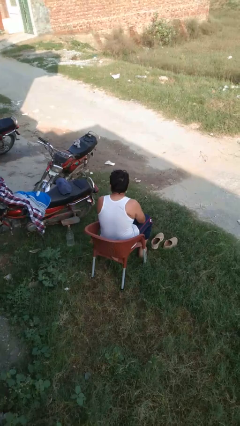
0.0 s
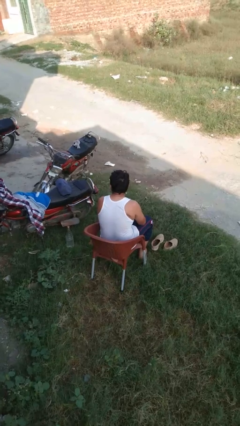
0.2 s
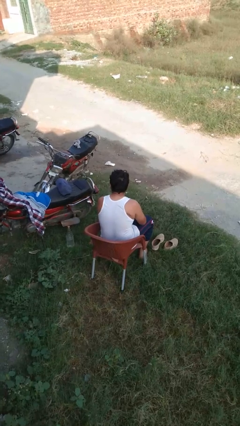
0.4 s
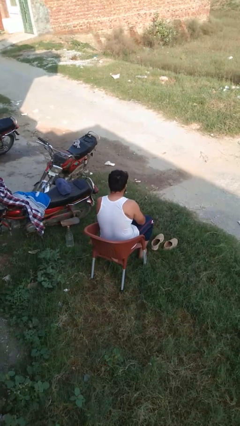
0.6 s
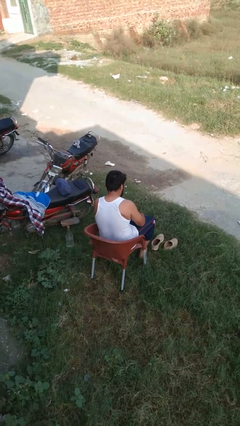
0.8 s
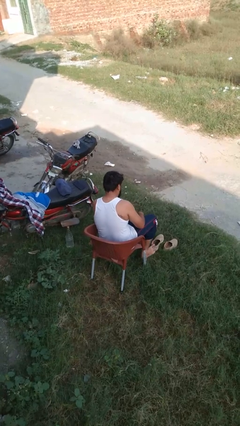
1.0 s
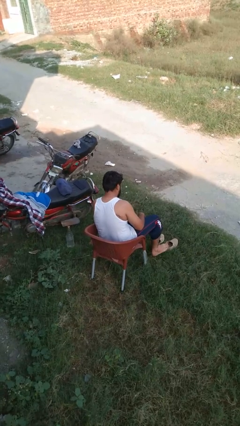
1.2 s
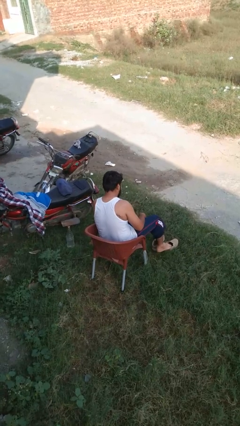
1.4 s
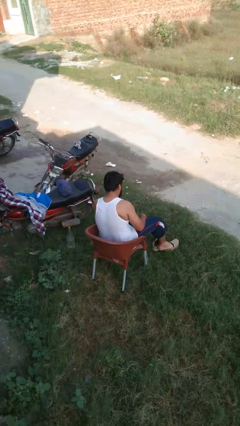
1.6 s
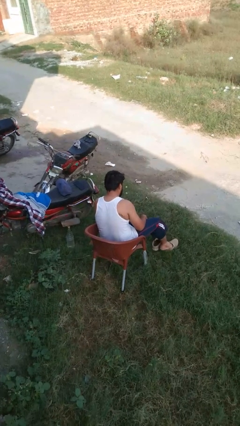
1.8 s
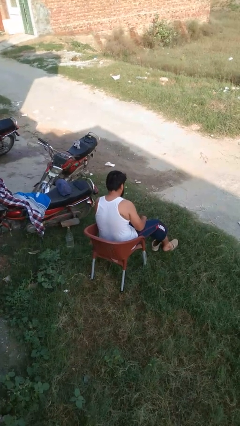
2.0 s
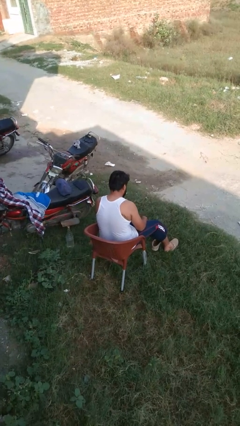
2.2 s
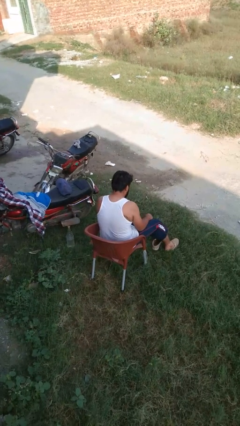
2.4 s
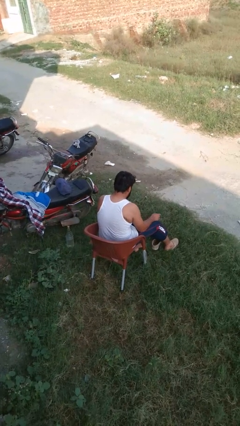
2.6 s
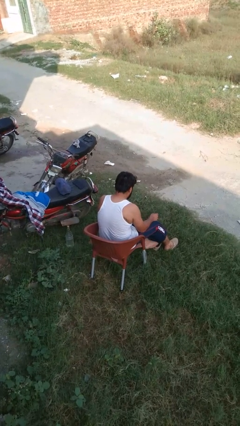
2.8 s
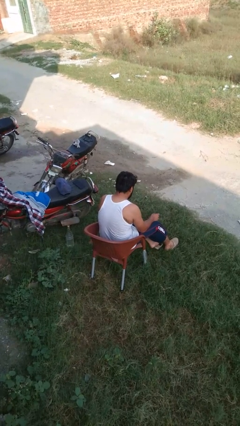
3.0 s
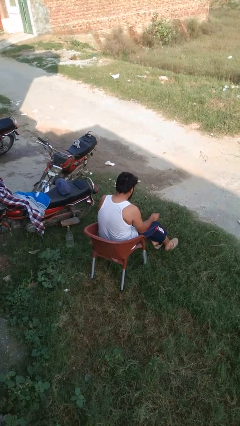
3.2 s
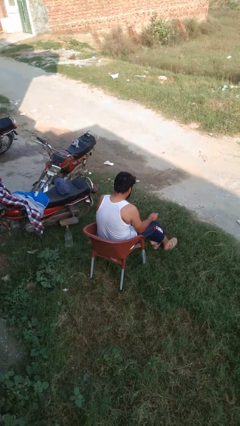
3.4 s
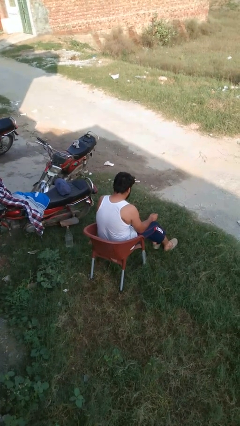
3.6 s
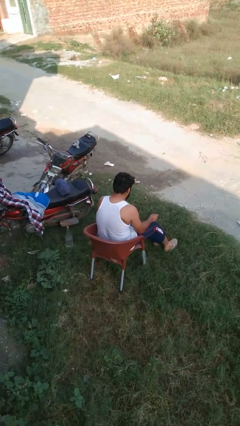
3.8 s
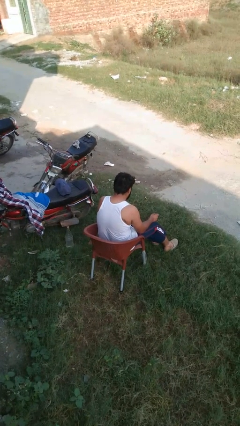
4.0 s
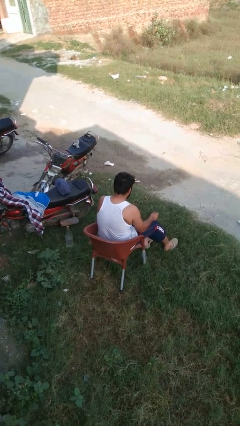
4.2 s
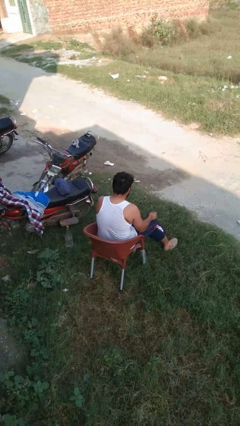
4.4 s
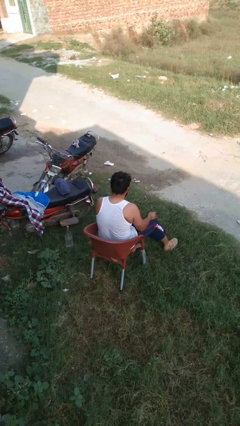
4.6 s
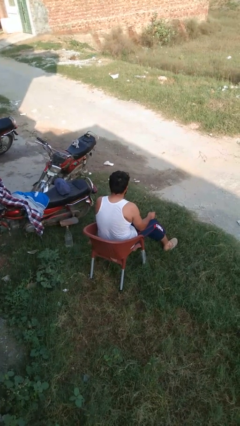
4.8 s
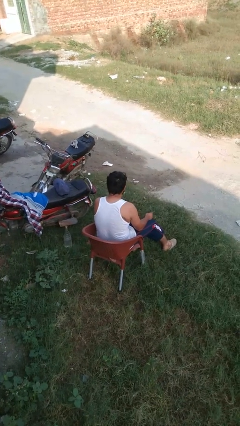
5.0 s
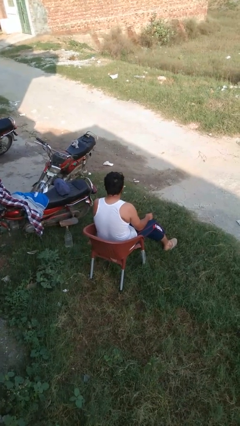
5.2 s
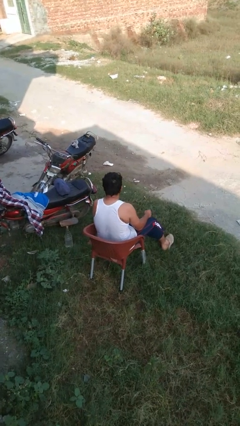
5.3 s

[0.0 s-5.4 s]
person puts on shoes

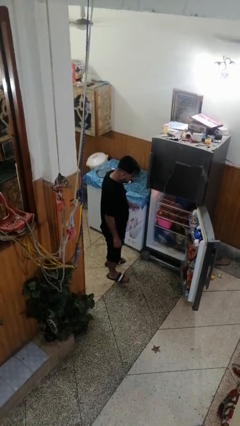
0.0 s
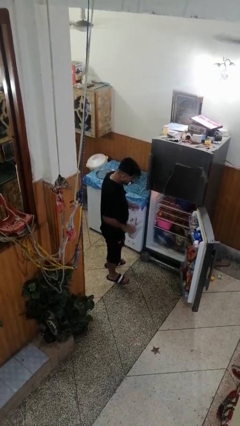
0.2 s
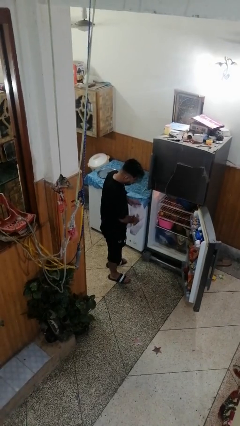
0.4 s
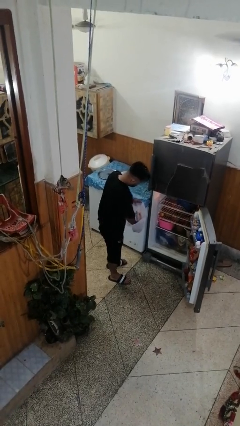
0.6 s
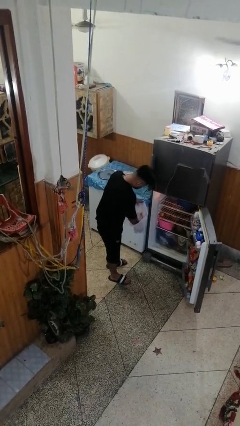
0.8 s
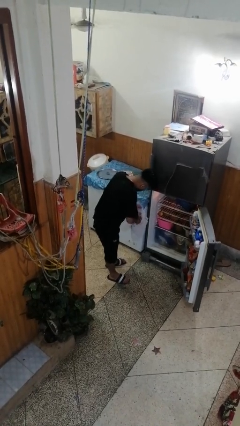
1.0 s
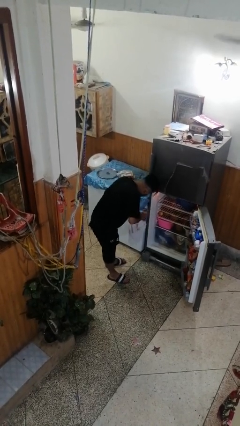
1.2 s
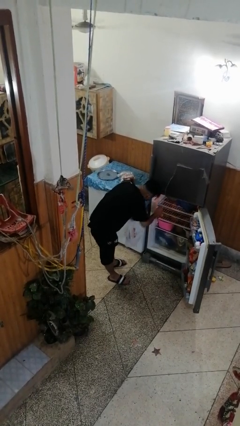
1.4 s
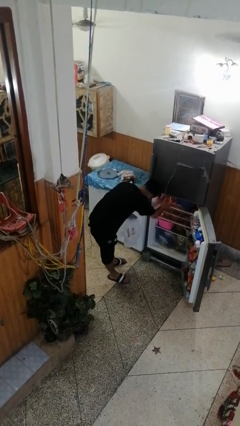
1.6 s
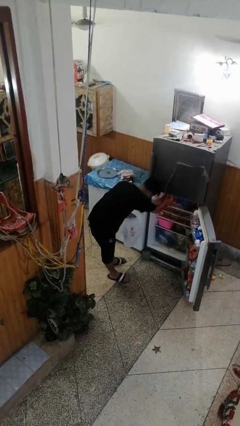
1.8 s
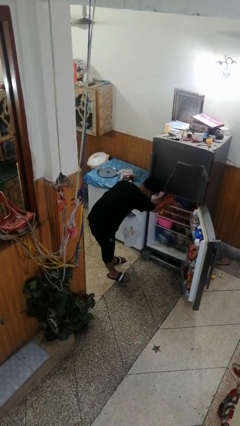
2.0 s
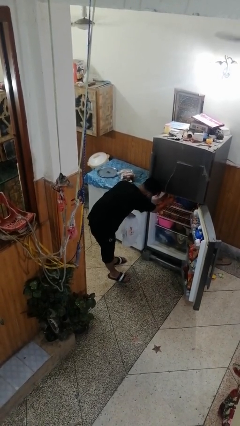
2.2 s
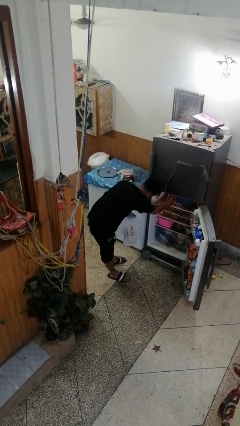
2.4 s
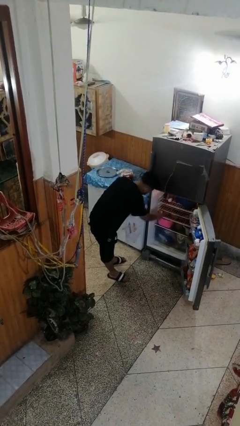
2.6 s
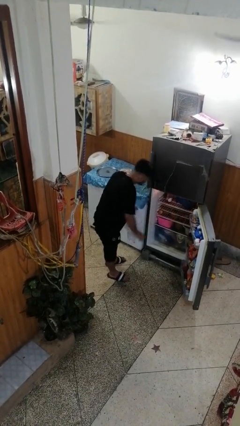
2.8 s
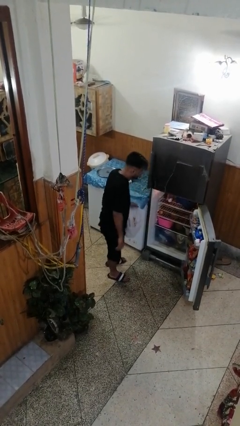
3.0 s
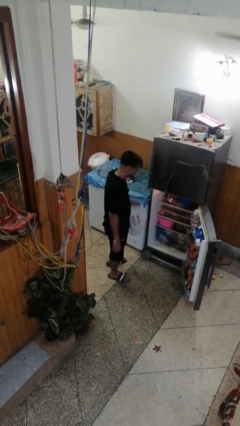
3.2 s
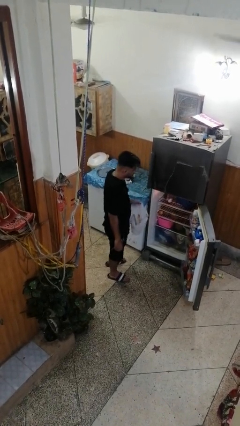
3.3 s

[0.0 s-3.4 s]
person loads groceries into refrigerator

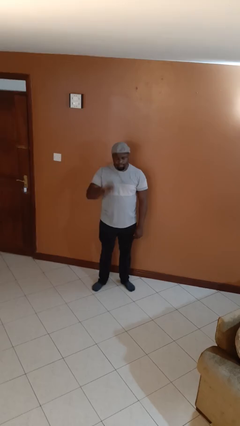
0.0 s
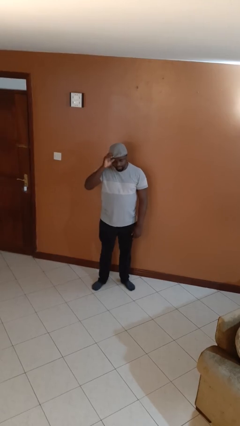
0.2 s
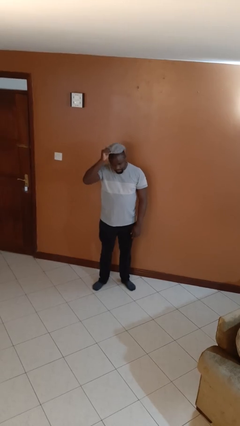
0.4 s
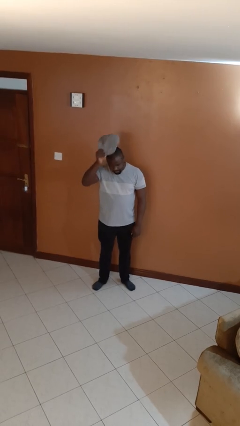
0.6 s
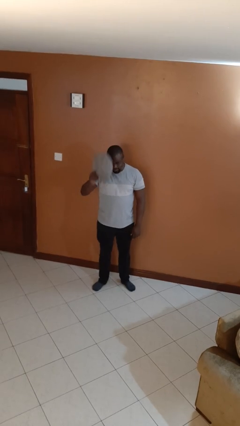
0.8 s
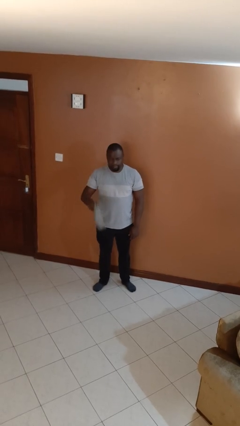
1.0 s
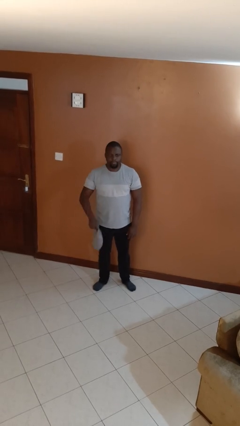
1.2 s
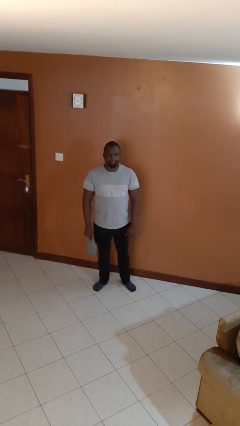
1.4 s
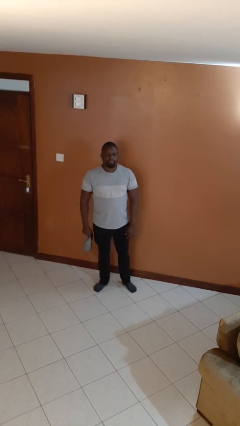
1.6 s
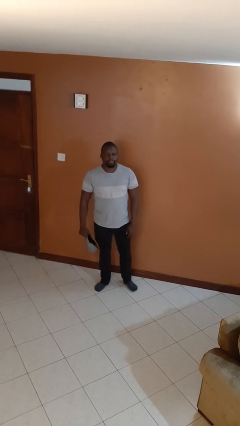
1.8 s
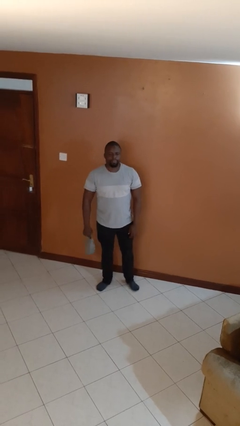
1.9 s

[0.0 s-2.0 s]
person takes off hat

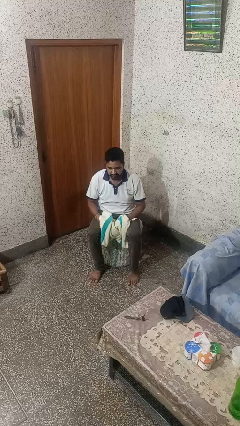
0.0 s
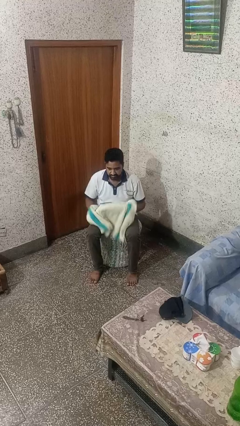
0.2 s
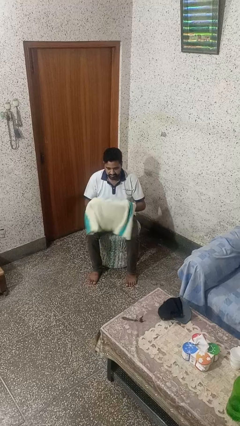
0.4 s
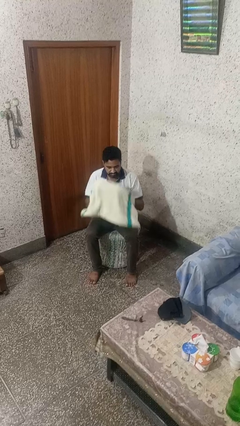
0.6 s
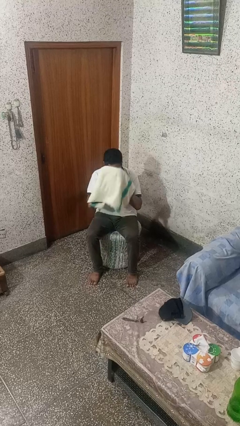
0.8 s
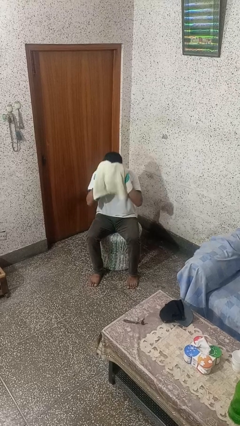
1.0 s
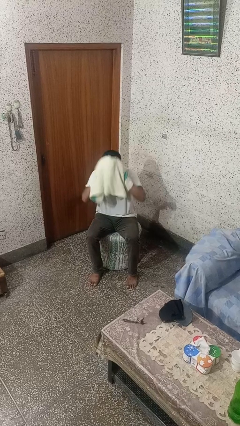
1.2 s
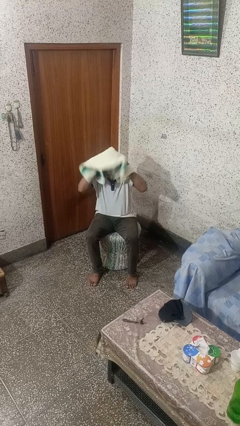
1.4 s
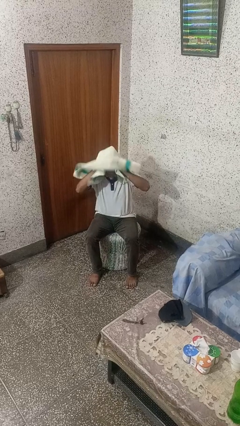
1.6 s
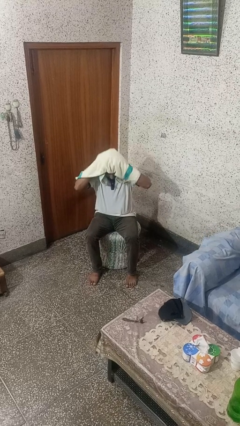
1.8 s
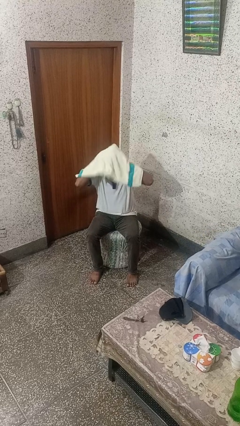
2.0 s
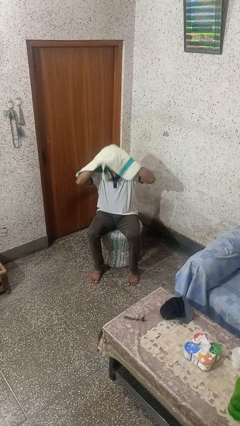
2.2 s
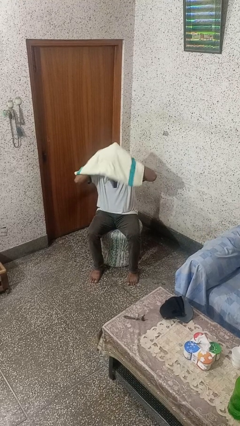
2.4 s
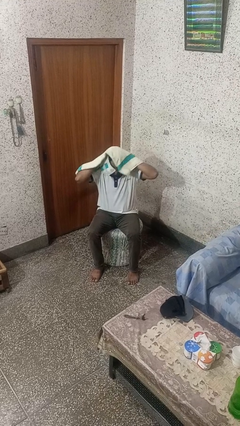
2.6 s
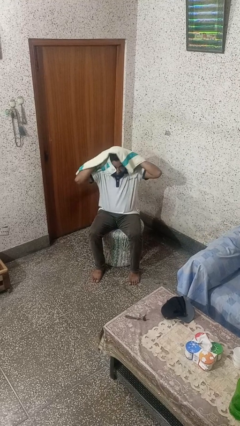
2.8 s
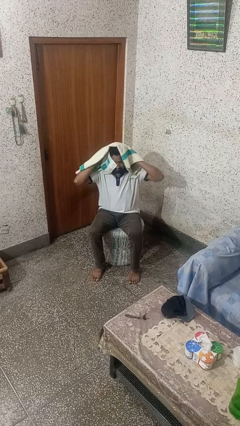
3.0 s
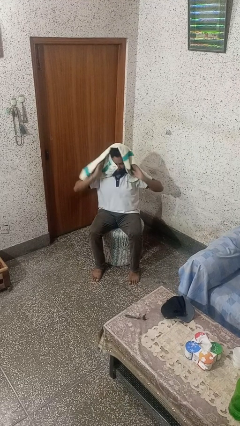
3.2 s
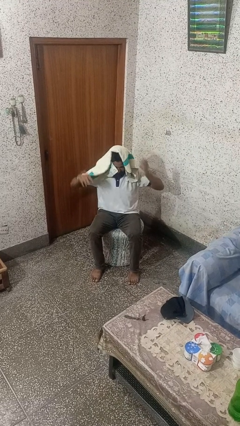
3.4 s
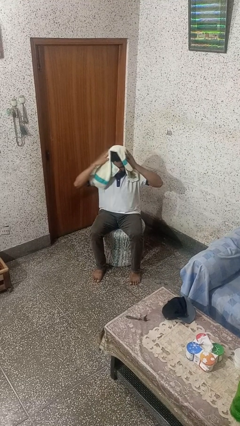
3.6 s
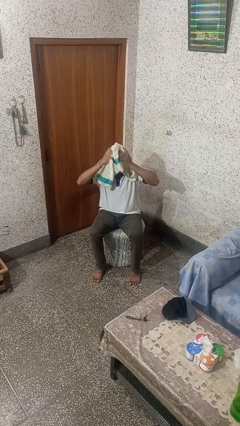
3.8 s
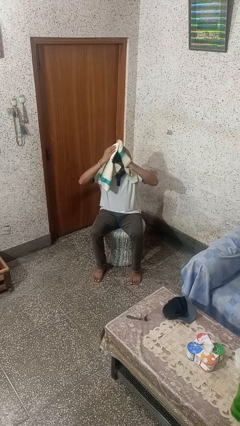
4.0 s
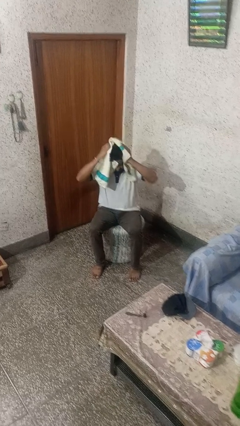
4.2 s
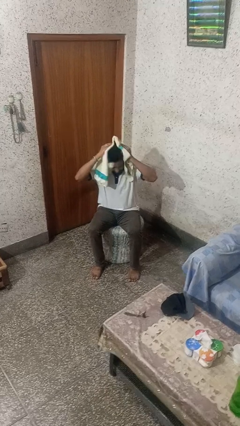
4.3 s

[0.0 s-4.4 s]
person dries hair with towel

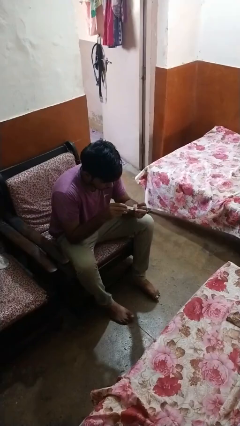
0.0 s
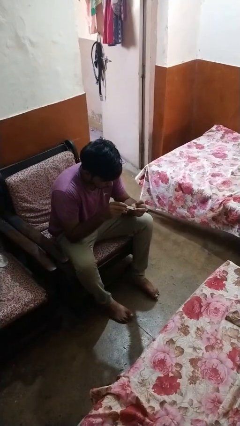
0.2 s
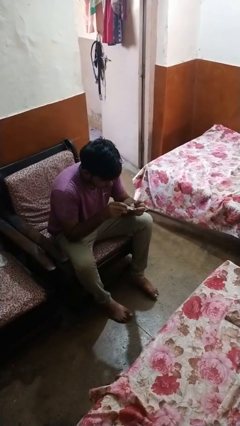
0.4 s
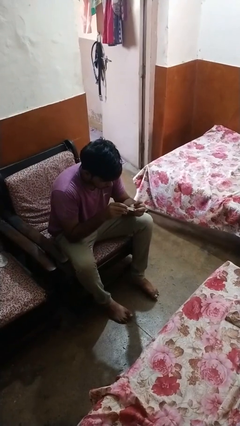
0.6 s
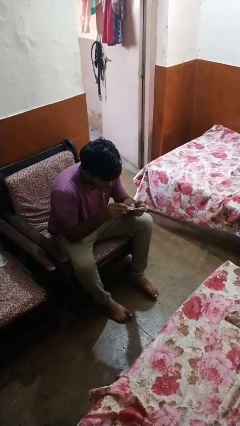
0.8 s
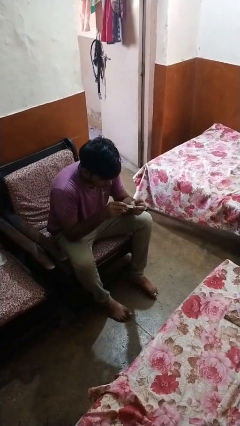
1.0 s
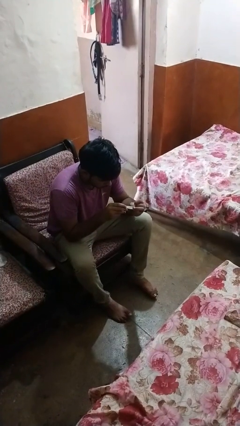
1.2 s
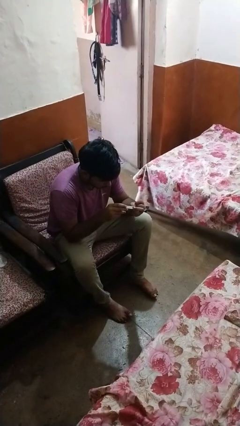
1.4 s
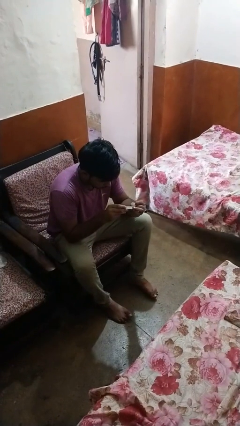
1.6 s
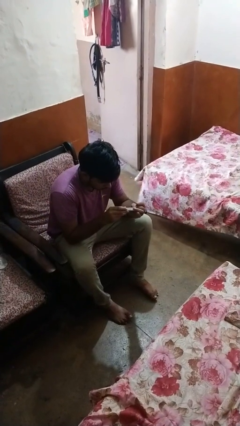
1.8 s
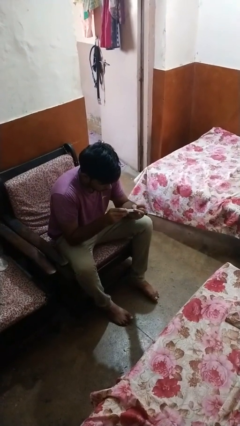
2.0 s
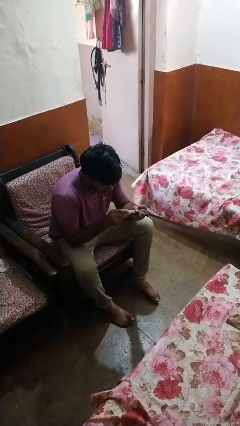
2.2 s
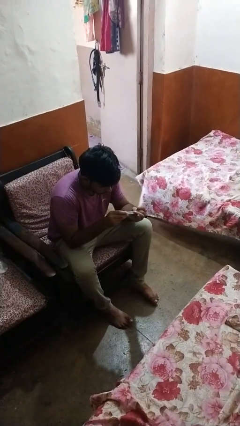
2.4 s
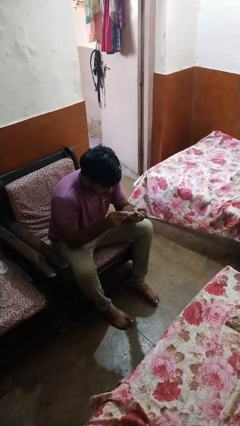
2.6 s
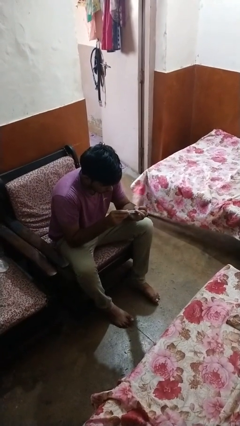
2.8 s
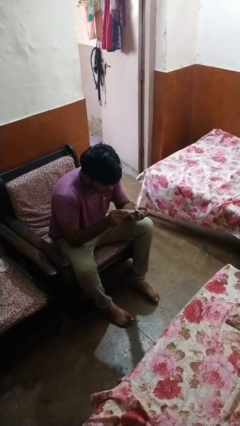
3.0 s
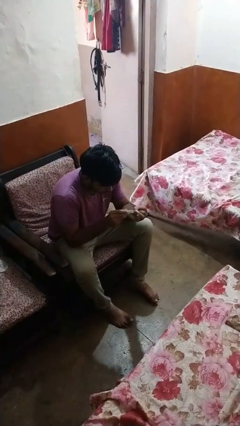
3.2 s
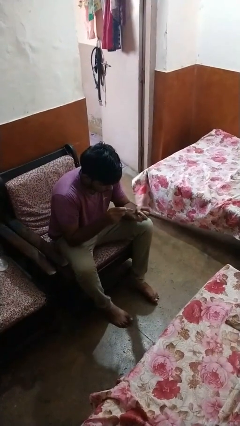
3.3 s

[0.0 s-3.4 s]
person clips fingernails
